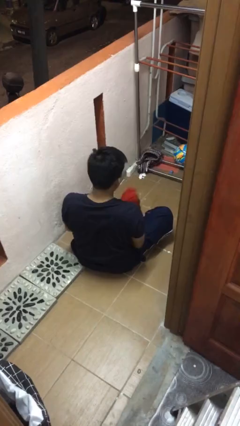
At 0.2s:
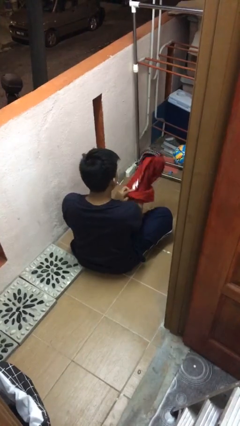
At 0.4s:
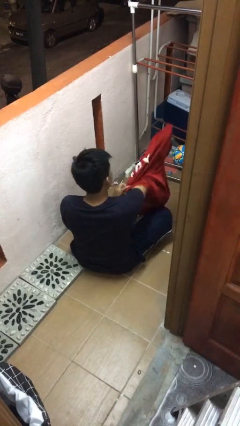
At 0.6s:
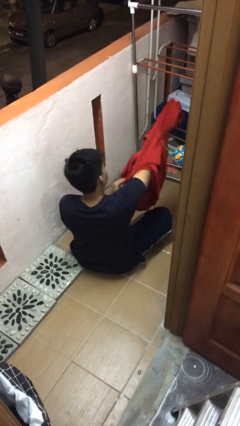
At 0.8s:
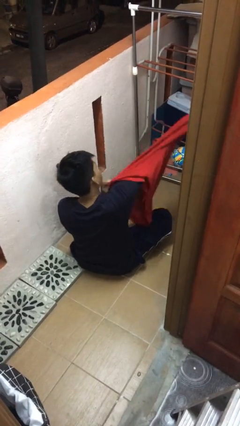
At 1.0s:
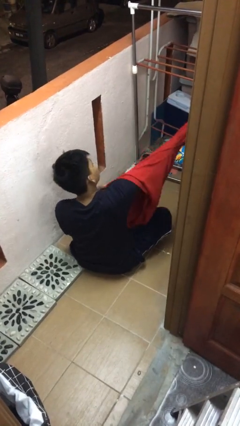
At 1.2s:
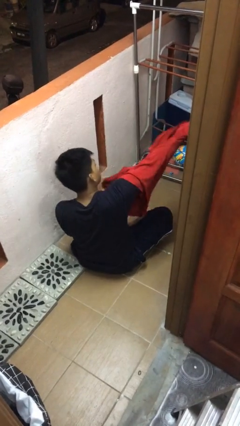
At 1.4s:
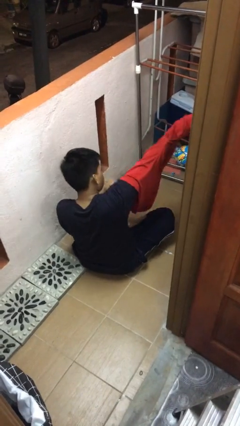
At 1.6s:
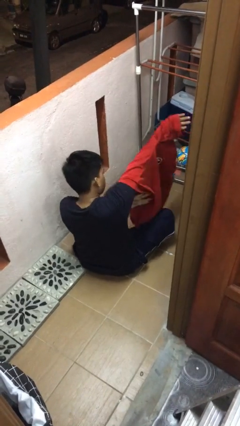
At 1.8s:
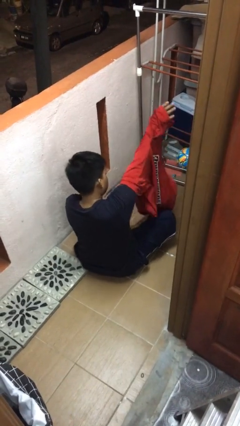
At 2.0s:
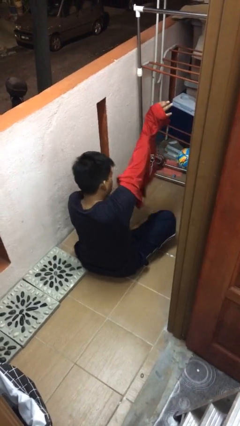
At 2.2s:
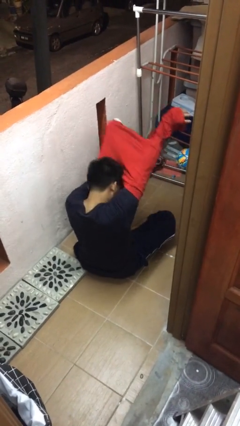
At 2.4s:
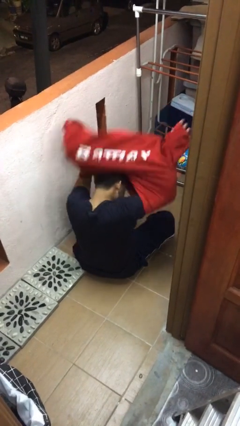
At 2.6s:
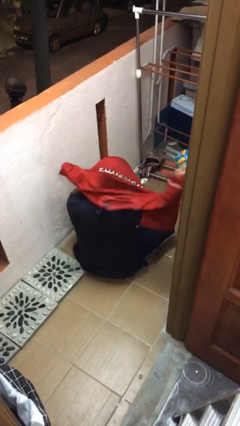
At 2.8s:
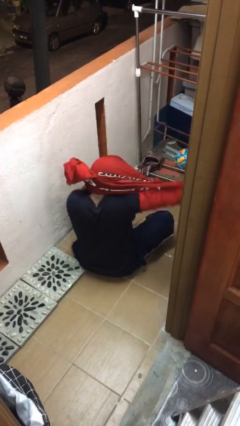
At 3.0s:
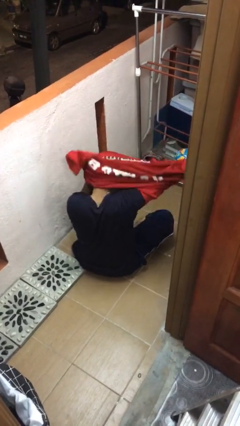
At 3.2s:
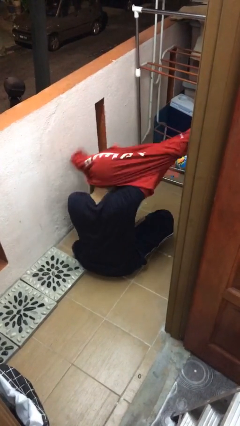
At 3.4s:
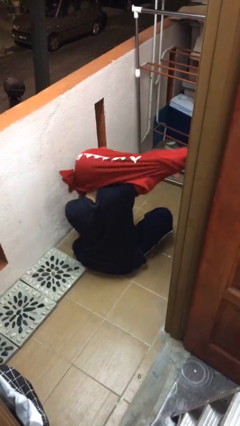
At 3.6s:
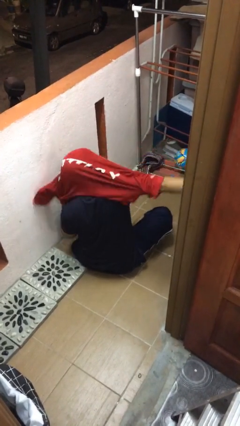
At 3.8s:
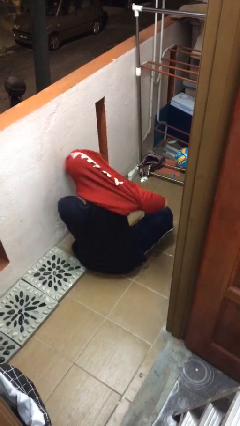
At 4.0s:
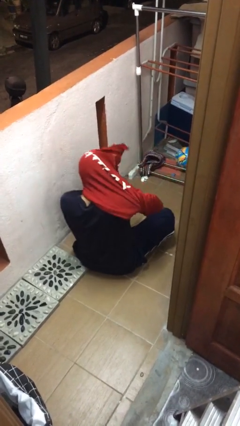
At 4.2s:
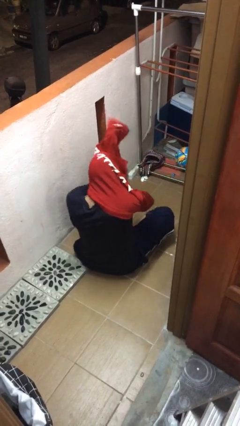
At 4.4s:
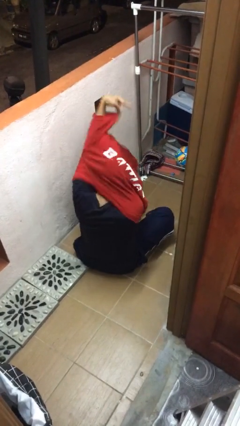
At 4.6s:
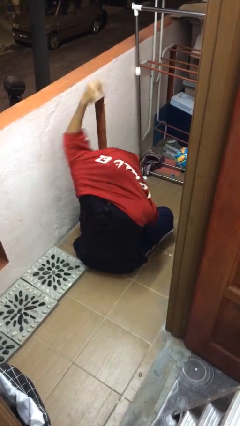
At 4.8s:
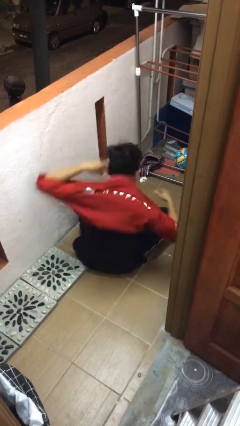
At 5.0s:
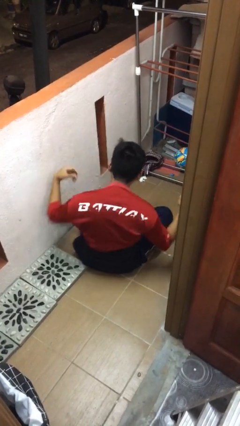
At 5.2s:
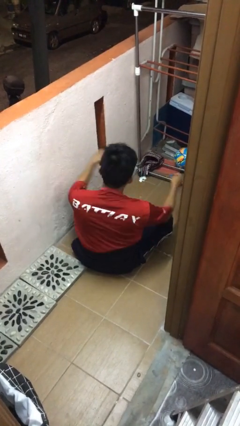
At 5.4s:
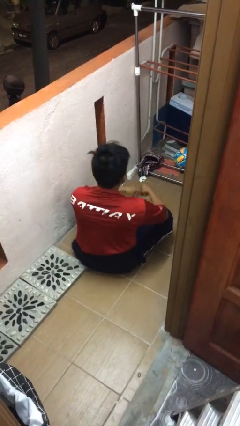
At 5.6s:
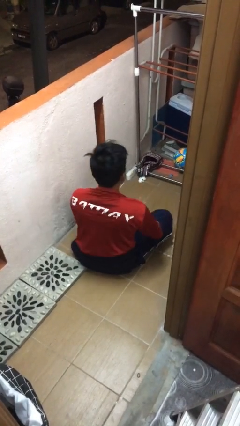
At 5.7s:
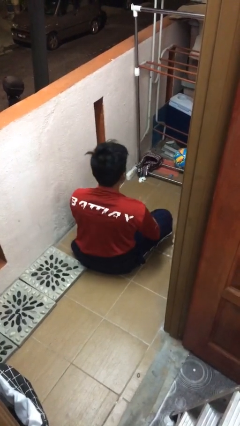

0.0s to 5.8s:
person puts on shirt

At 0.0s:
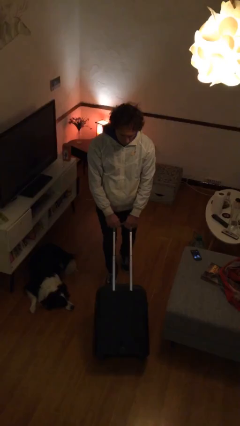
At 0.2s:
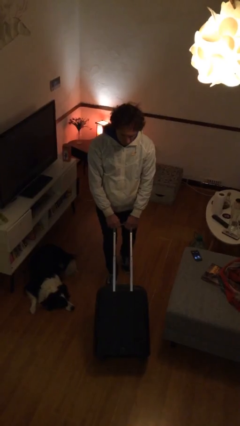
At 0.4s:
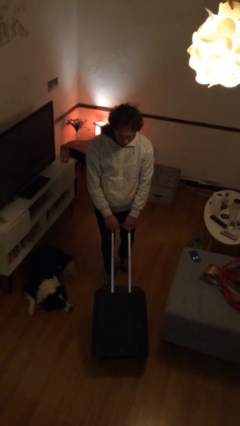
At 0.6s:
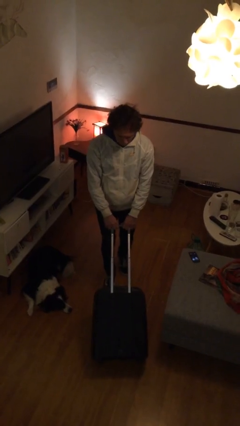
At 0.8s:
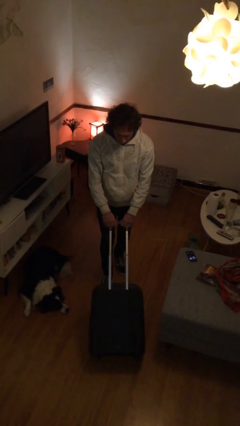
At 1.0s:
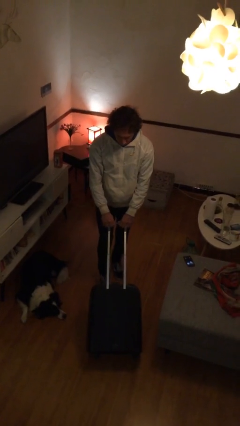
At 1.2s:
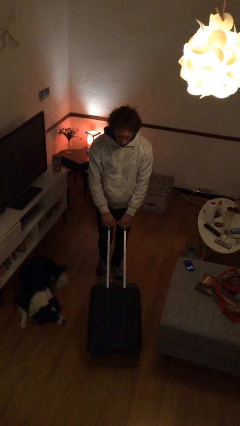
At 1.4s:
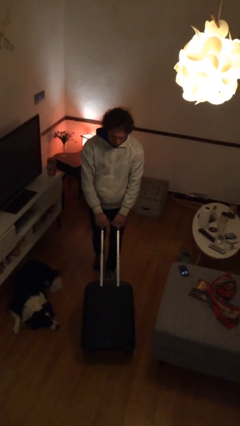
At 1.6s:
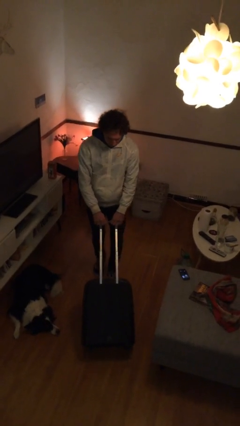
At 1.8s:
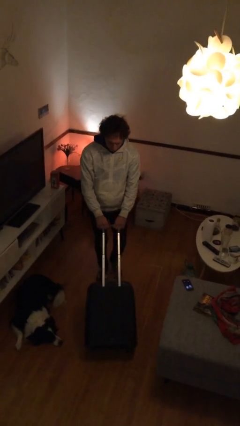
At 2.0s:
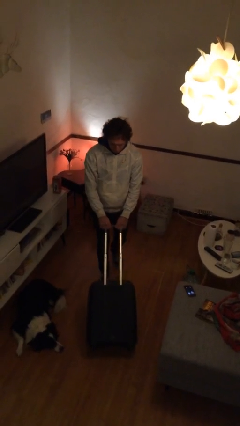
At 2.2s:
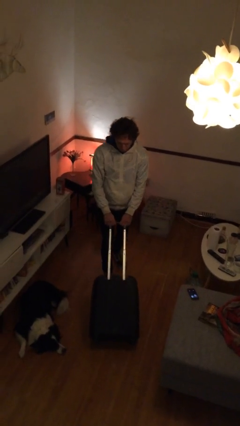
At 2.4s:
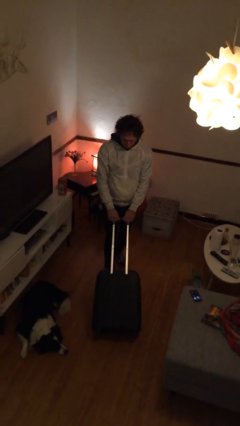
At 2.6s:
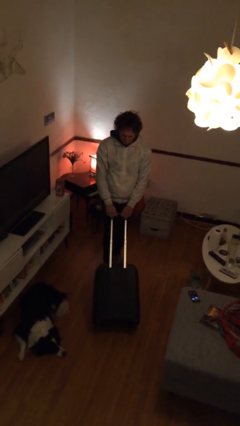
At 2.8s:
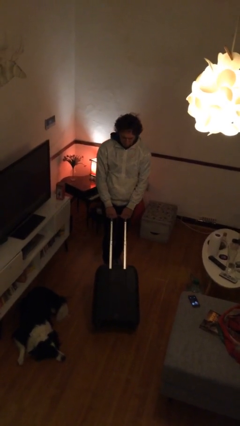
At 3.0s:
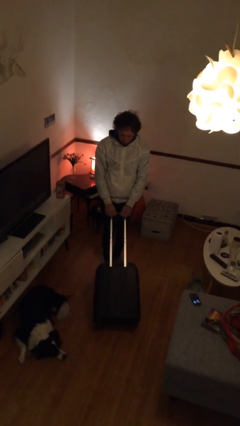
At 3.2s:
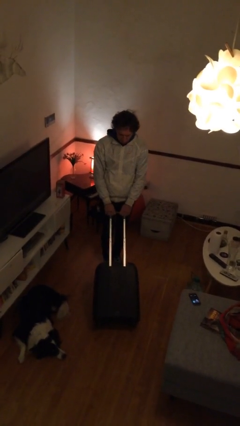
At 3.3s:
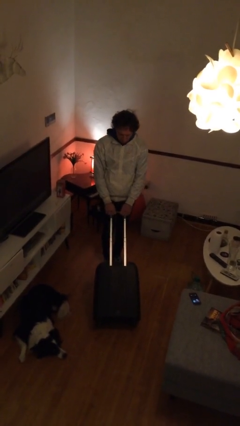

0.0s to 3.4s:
person pulls wheeled cart

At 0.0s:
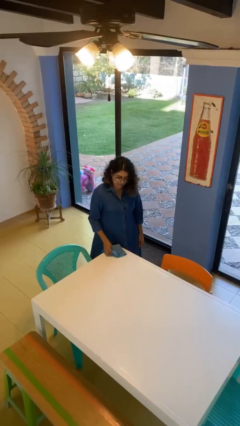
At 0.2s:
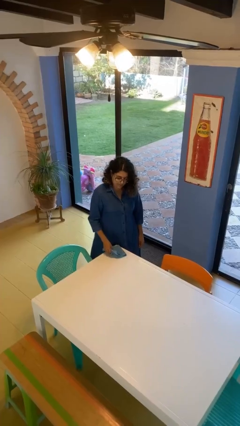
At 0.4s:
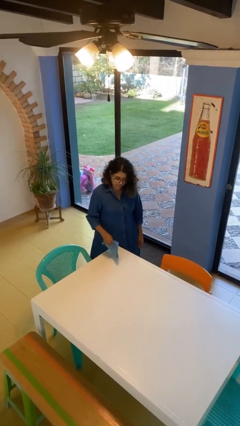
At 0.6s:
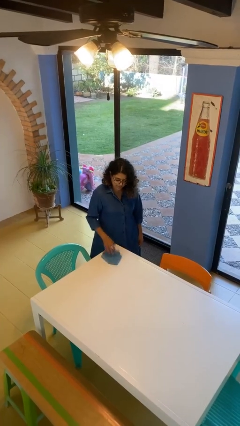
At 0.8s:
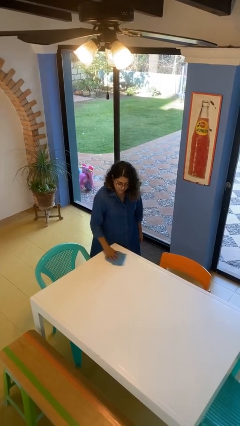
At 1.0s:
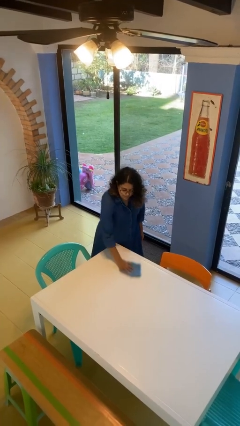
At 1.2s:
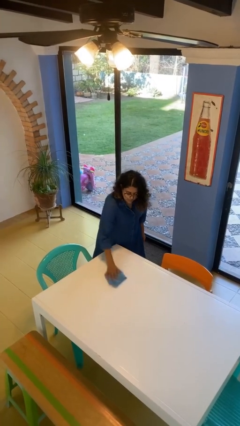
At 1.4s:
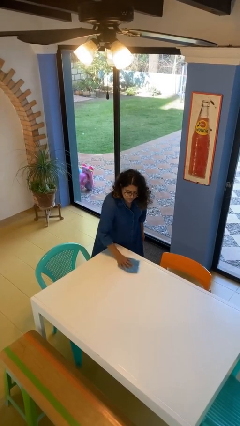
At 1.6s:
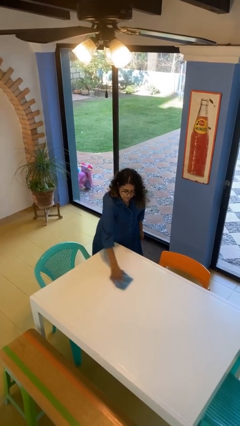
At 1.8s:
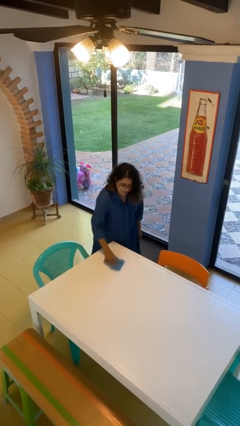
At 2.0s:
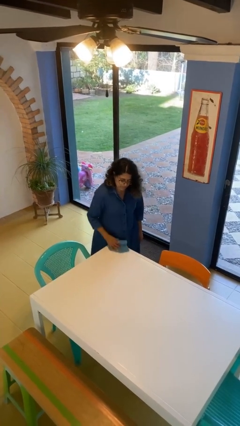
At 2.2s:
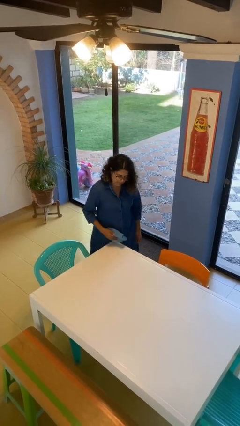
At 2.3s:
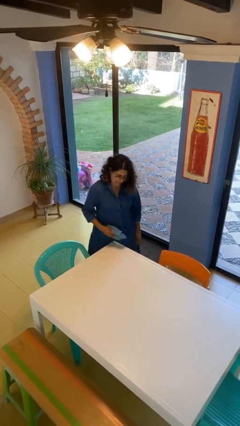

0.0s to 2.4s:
person cleans table with rag

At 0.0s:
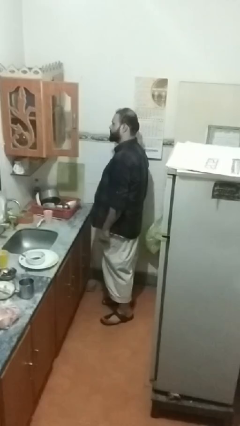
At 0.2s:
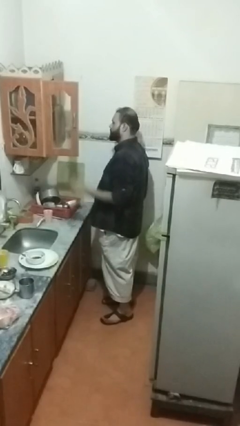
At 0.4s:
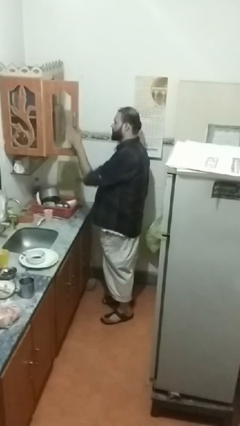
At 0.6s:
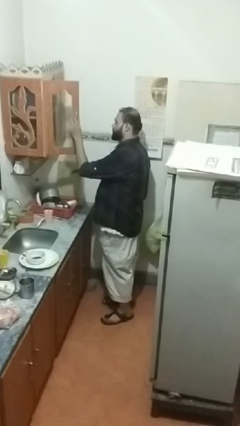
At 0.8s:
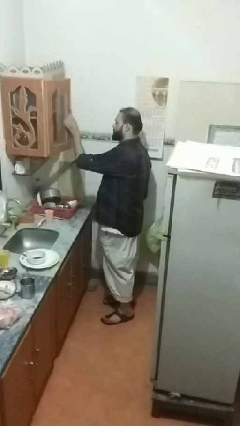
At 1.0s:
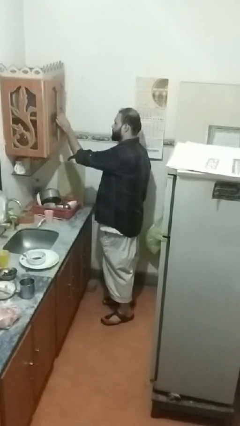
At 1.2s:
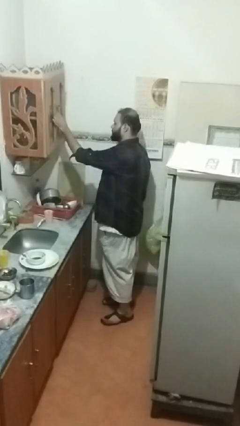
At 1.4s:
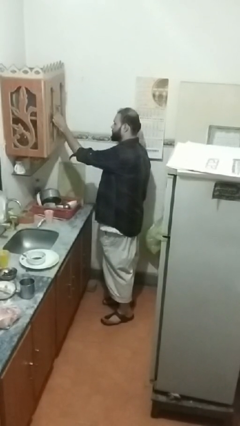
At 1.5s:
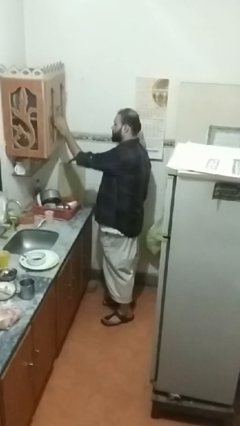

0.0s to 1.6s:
person closes cabinet

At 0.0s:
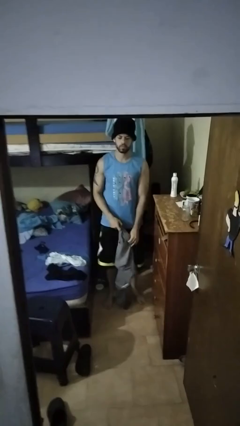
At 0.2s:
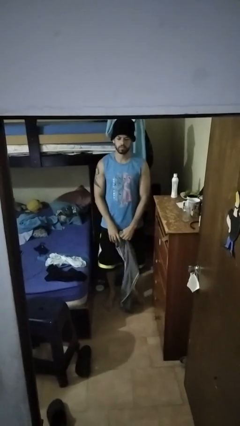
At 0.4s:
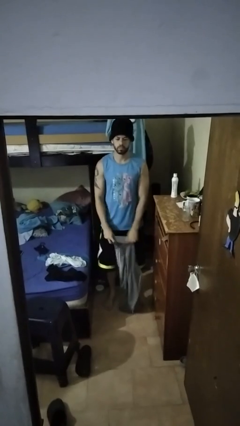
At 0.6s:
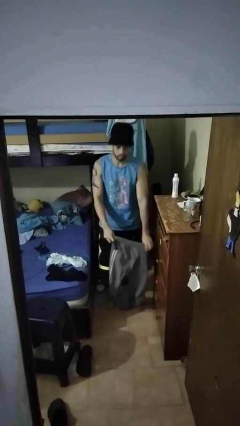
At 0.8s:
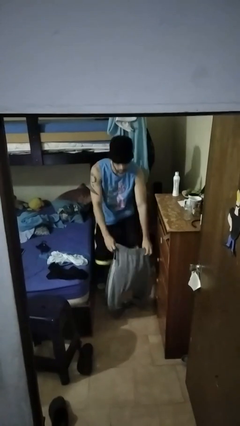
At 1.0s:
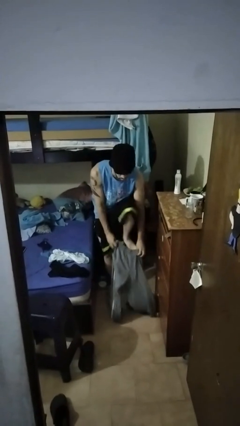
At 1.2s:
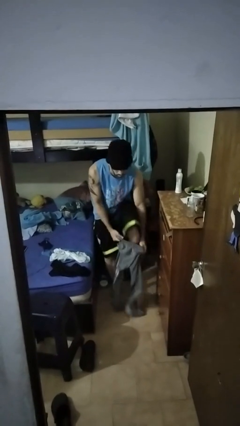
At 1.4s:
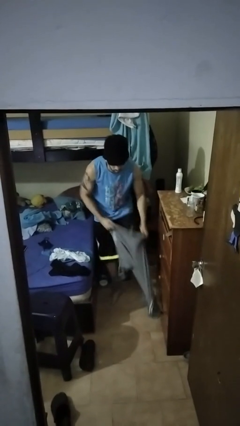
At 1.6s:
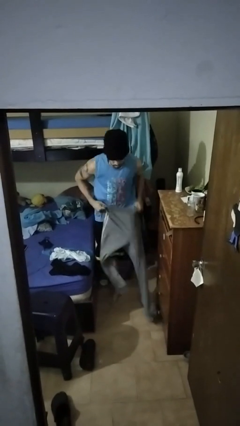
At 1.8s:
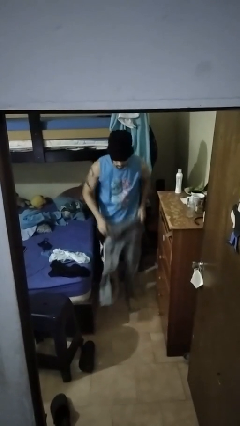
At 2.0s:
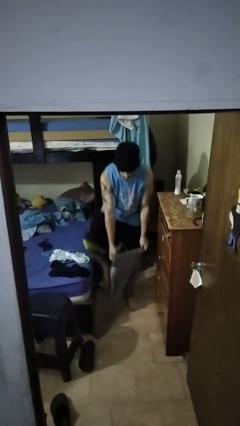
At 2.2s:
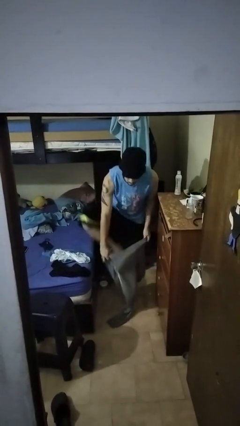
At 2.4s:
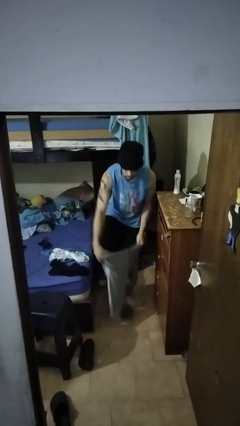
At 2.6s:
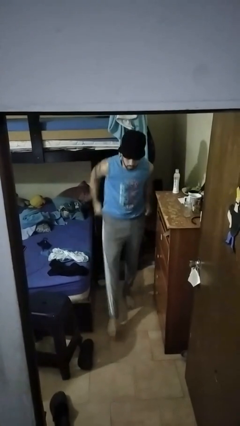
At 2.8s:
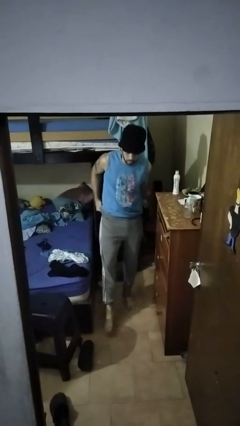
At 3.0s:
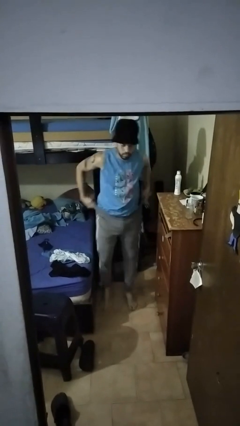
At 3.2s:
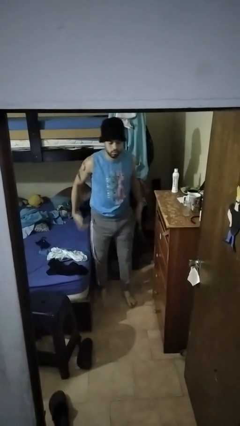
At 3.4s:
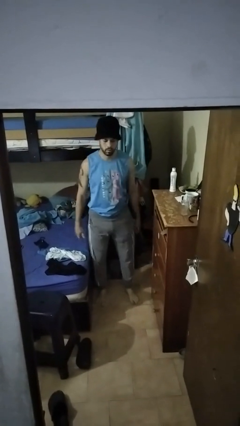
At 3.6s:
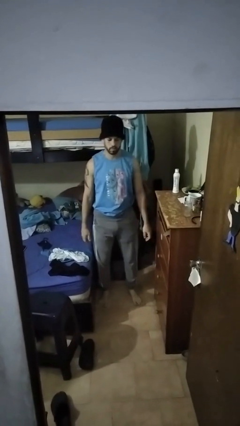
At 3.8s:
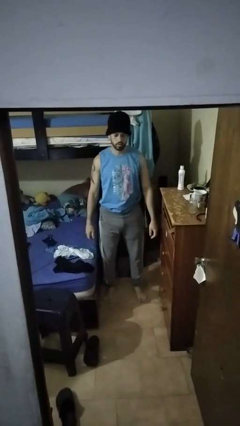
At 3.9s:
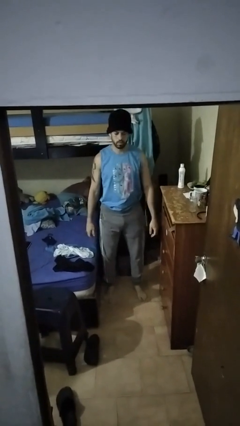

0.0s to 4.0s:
person puts on pants

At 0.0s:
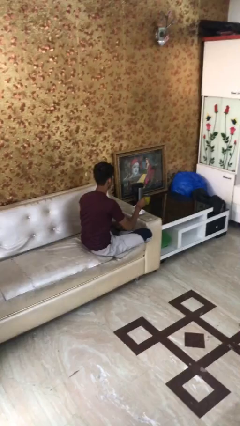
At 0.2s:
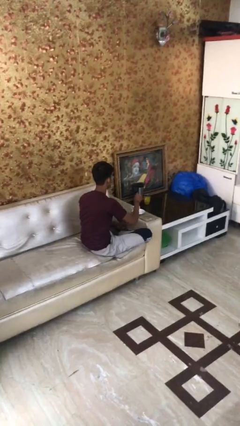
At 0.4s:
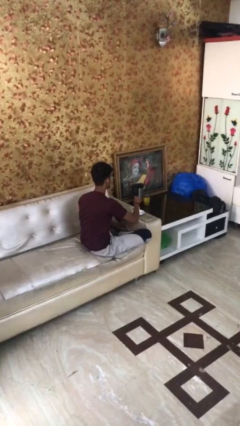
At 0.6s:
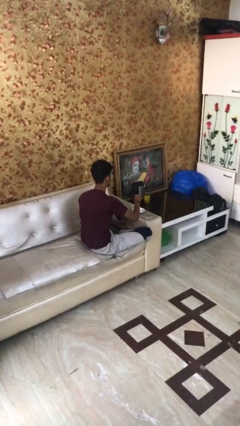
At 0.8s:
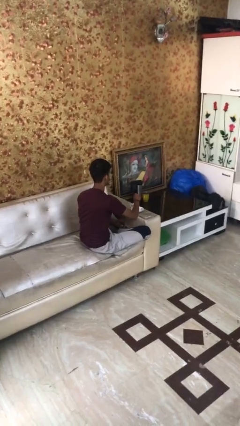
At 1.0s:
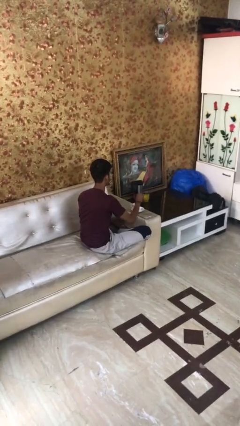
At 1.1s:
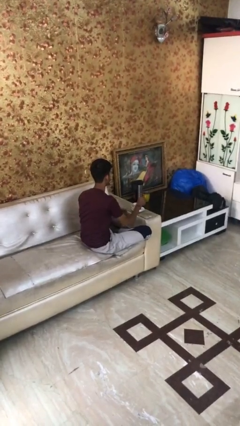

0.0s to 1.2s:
person stirs mug
